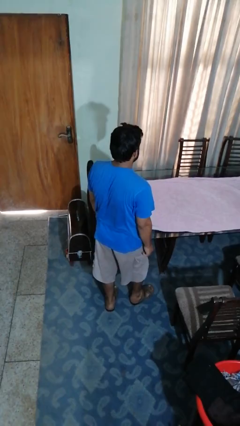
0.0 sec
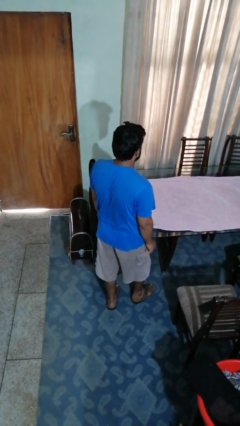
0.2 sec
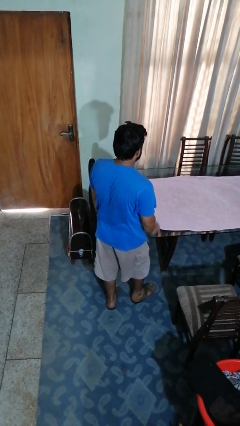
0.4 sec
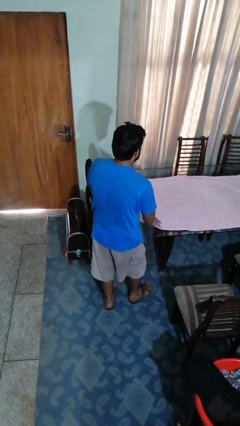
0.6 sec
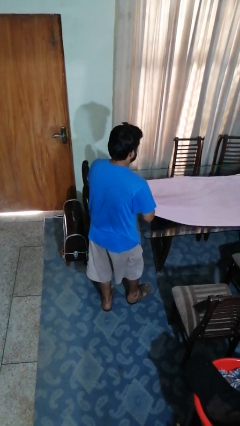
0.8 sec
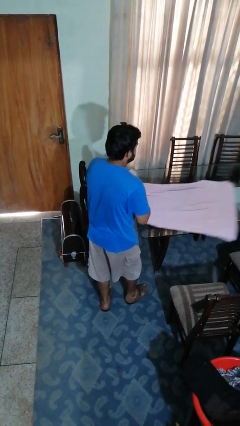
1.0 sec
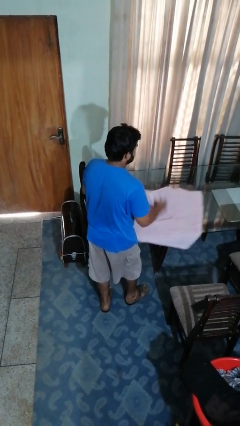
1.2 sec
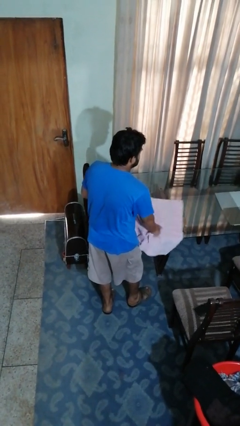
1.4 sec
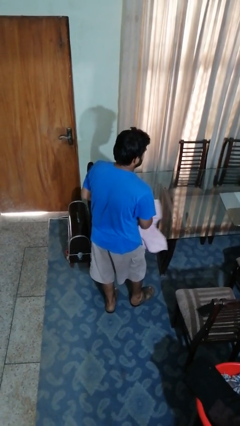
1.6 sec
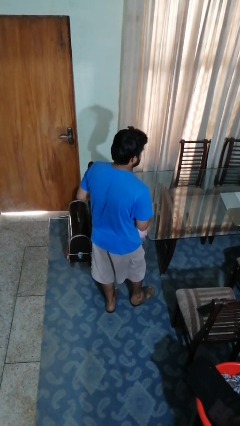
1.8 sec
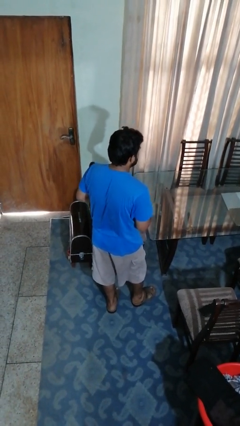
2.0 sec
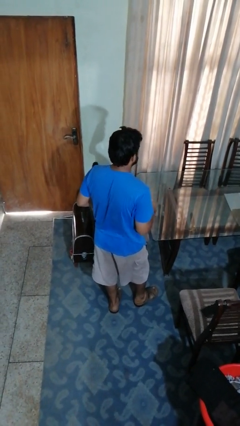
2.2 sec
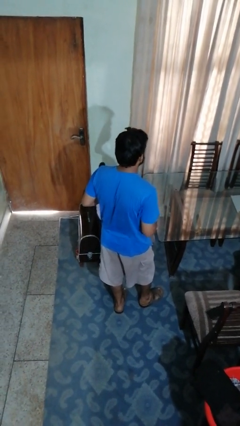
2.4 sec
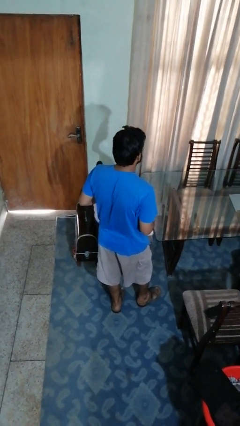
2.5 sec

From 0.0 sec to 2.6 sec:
person folds tablecloth

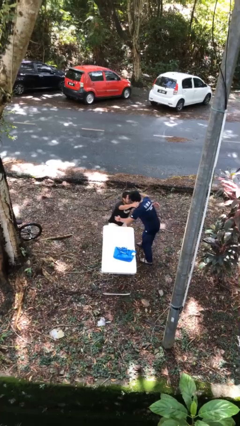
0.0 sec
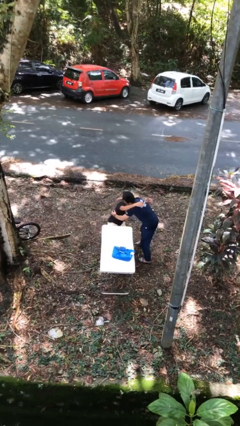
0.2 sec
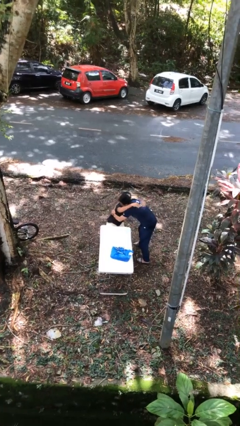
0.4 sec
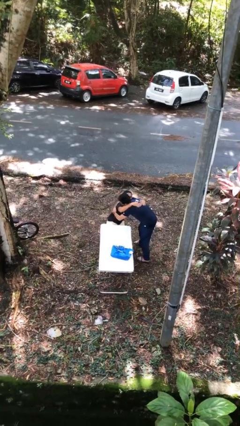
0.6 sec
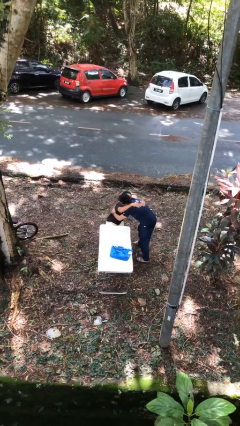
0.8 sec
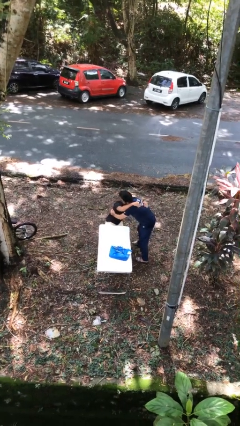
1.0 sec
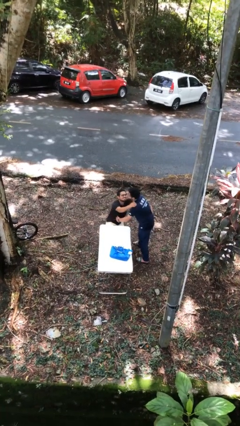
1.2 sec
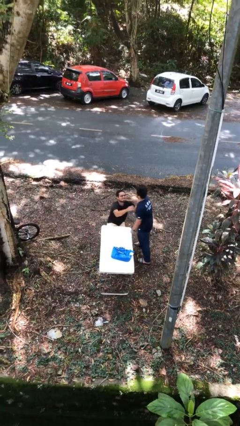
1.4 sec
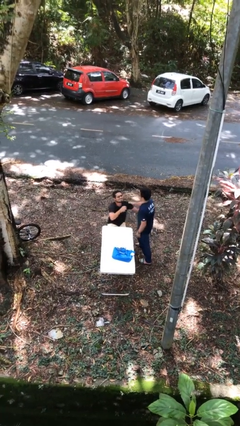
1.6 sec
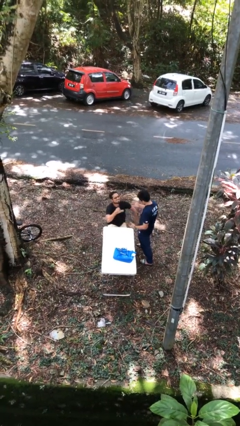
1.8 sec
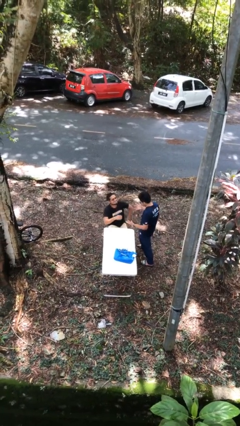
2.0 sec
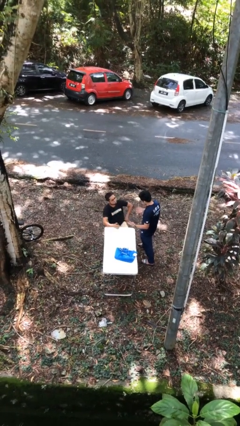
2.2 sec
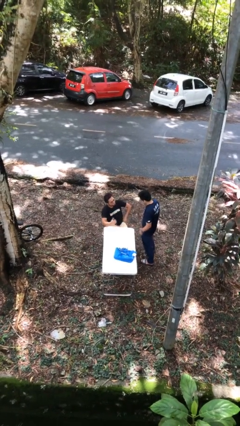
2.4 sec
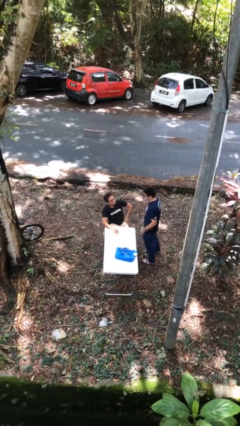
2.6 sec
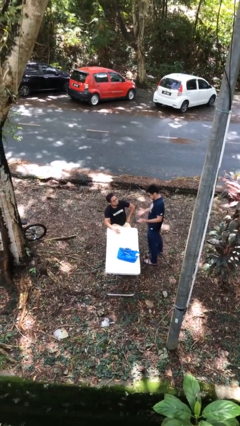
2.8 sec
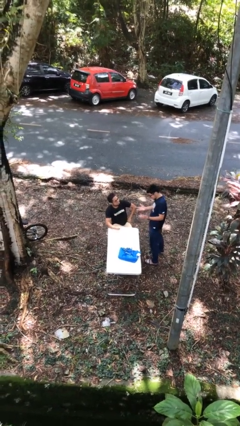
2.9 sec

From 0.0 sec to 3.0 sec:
person embraces person

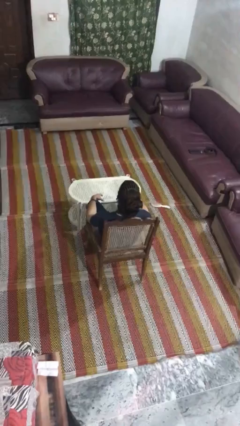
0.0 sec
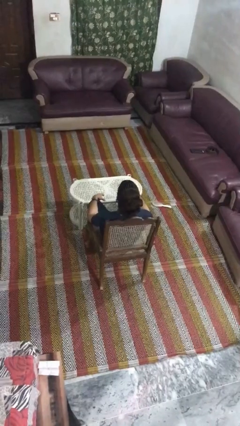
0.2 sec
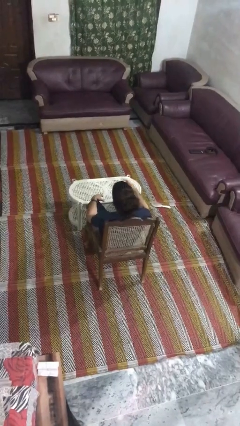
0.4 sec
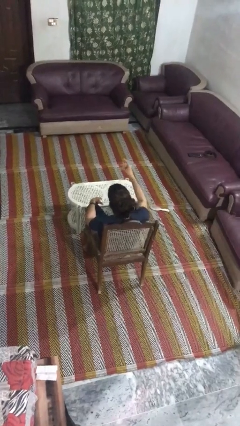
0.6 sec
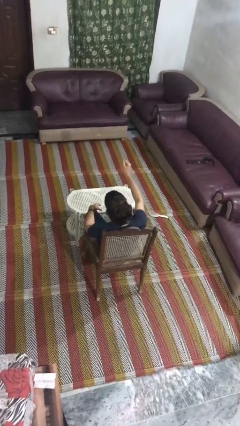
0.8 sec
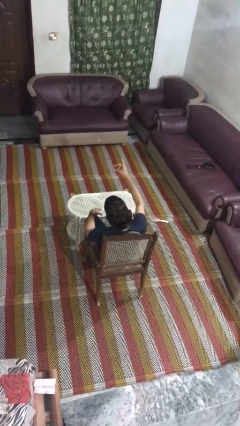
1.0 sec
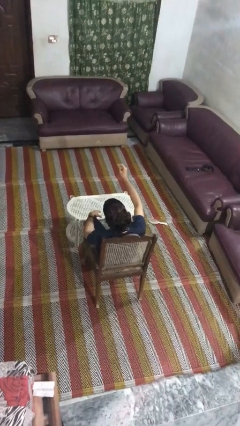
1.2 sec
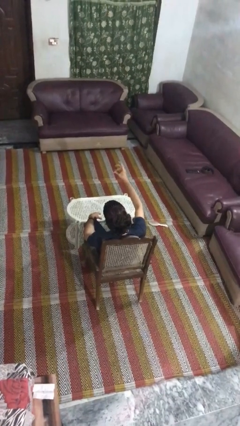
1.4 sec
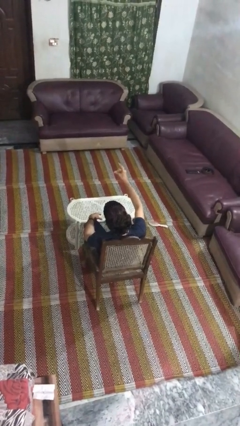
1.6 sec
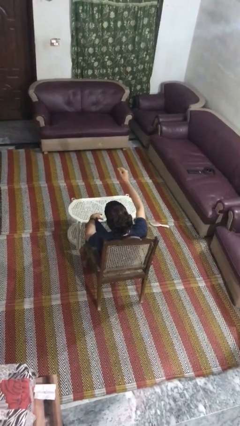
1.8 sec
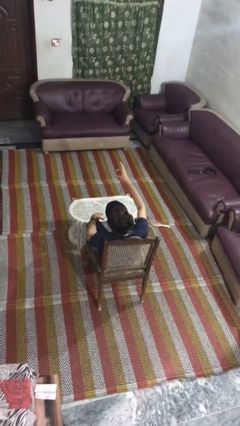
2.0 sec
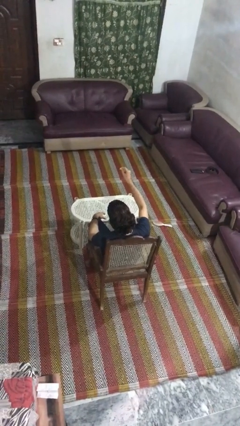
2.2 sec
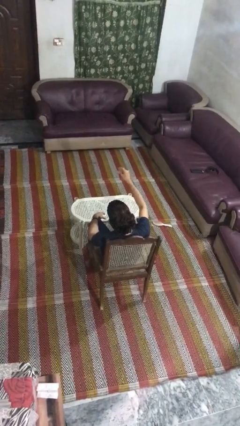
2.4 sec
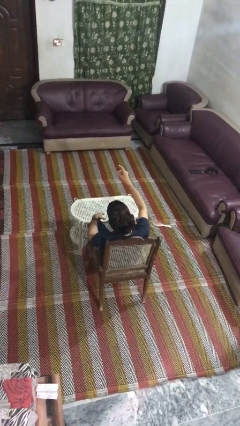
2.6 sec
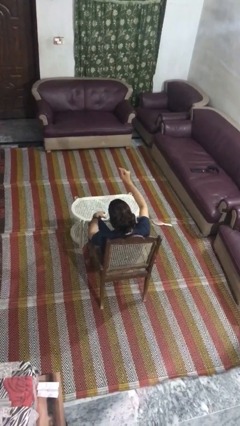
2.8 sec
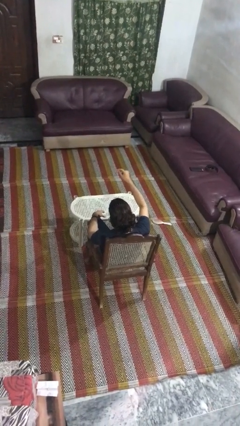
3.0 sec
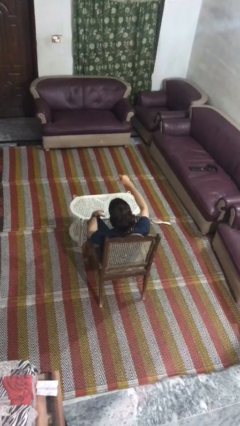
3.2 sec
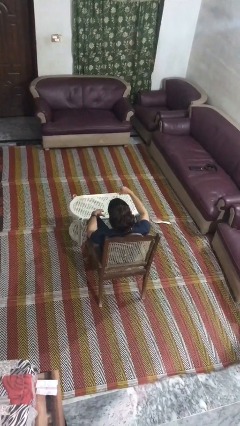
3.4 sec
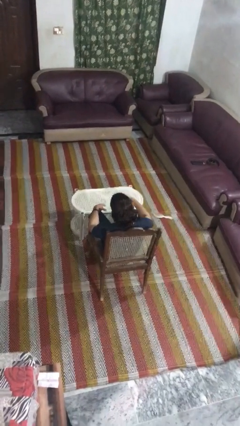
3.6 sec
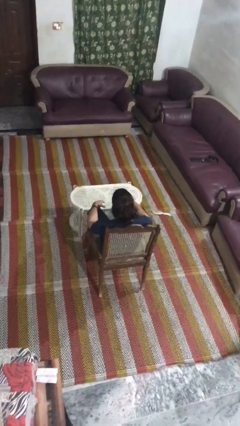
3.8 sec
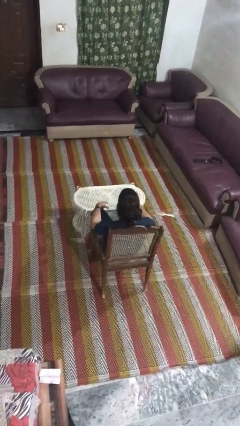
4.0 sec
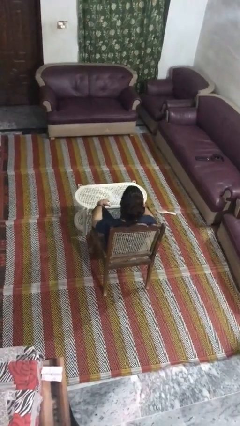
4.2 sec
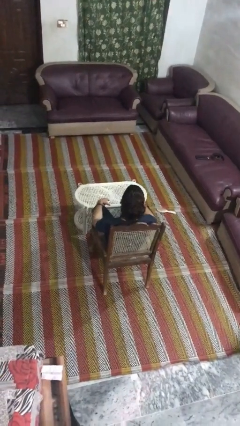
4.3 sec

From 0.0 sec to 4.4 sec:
person snaps fingers

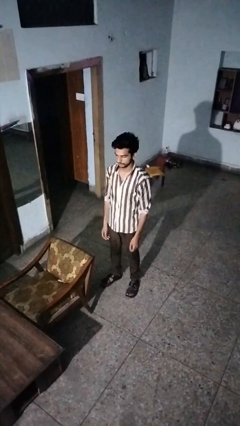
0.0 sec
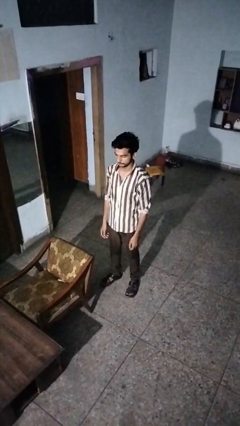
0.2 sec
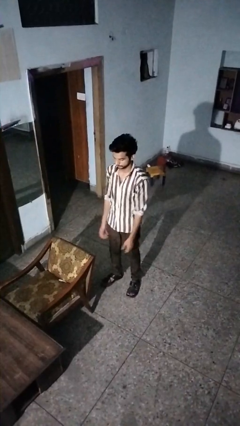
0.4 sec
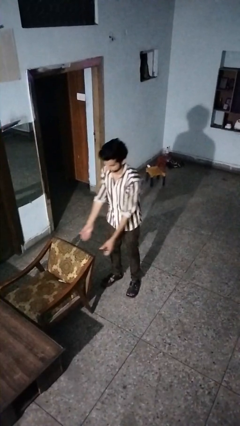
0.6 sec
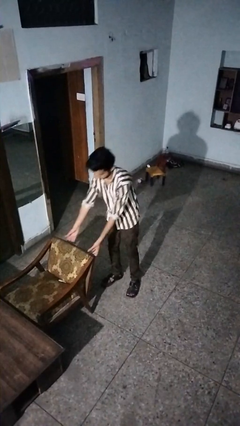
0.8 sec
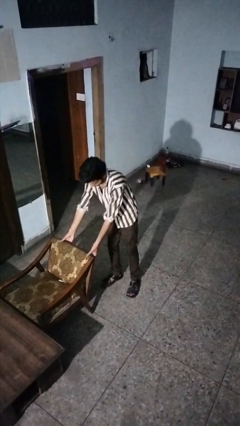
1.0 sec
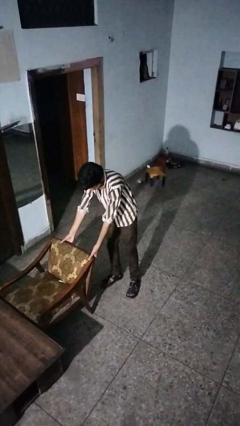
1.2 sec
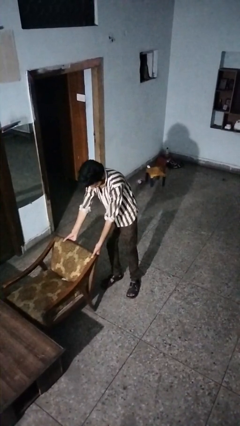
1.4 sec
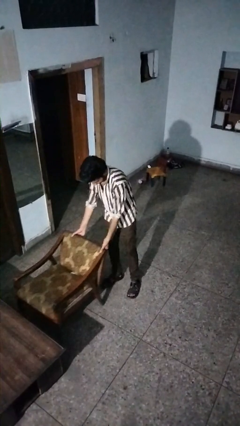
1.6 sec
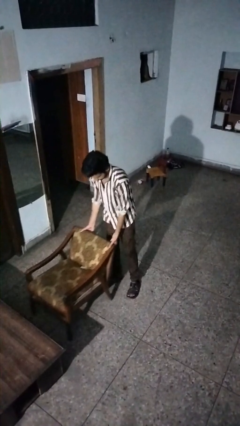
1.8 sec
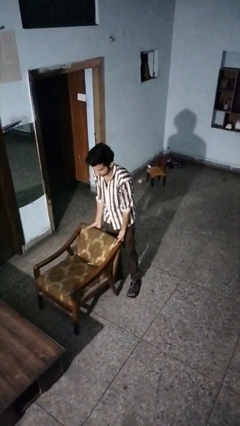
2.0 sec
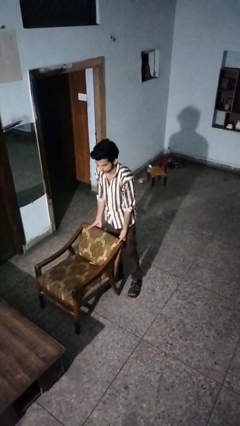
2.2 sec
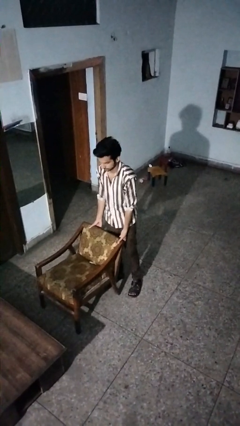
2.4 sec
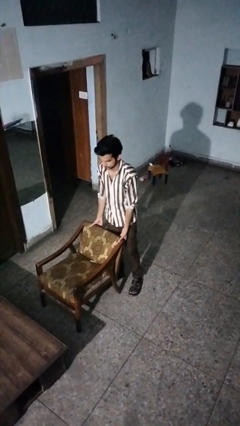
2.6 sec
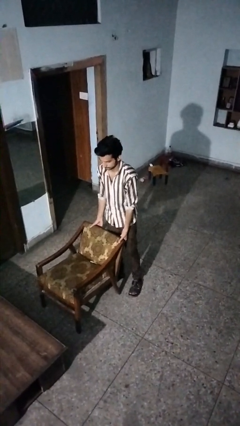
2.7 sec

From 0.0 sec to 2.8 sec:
person pulls out chair

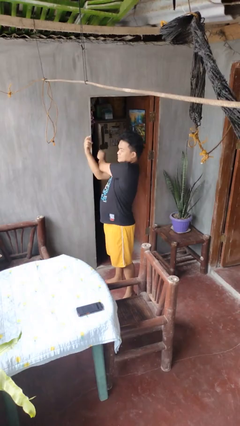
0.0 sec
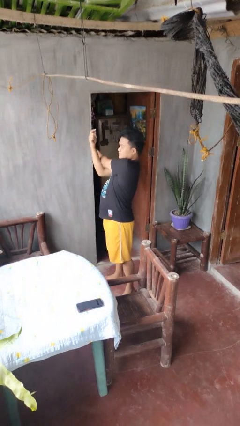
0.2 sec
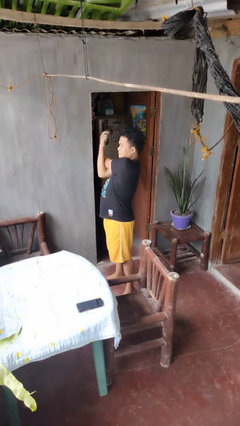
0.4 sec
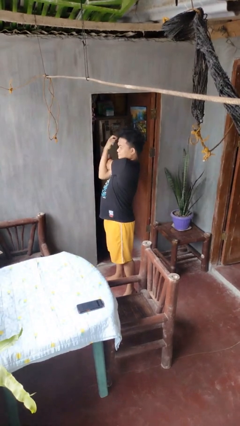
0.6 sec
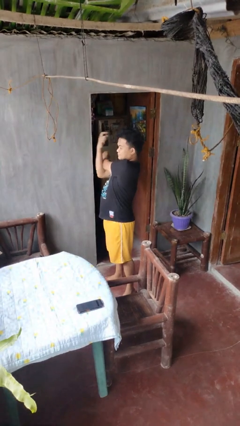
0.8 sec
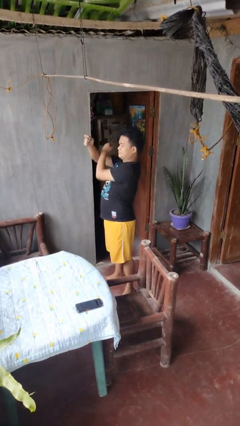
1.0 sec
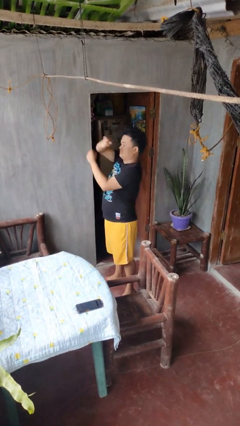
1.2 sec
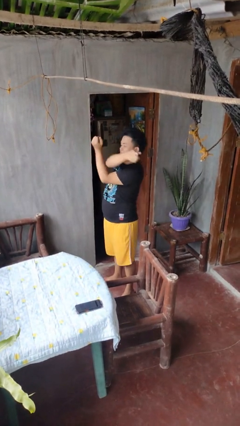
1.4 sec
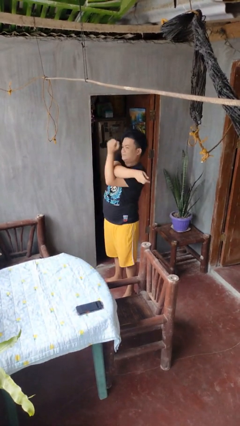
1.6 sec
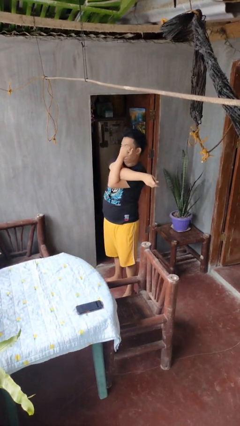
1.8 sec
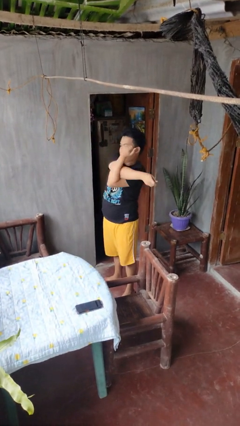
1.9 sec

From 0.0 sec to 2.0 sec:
person stretches arms to side

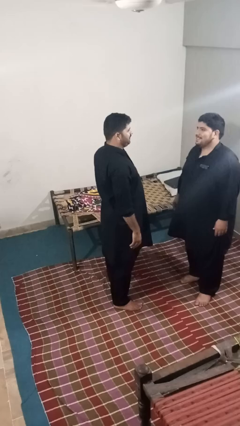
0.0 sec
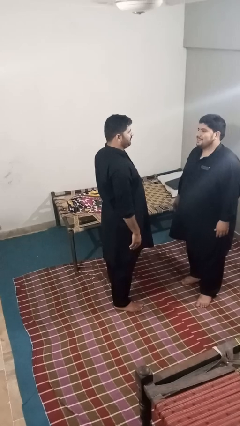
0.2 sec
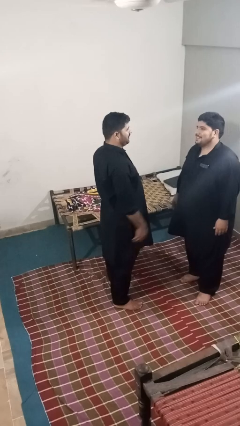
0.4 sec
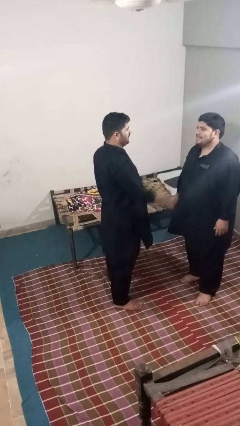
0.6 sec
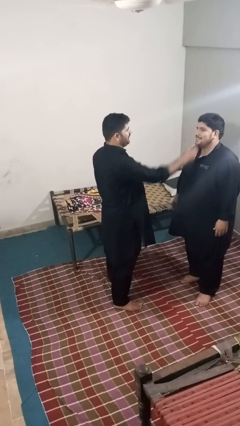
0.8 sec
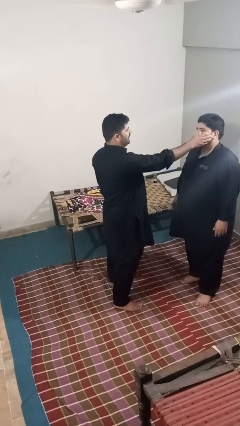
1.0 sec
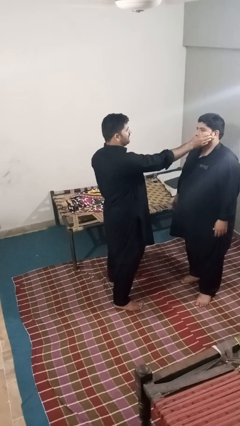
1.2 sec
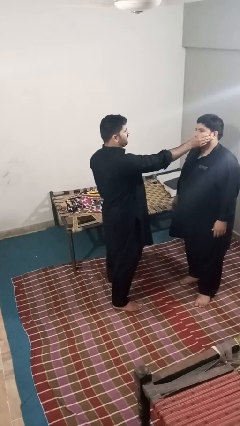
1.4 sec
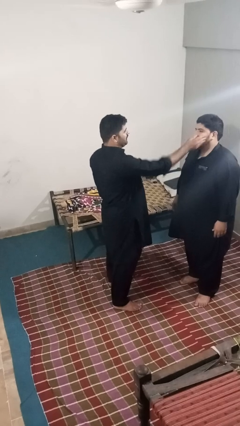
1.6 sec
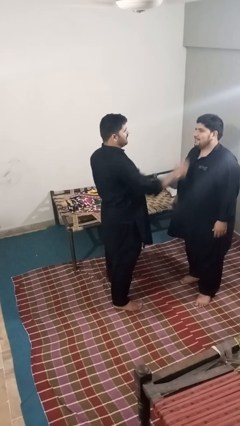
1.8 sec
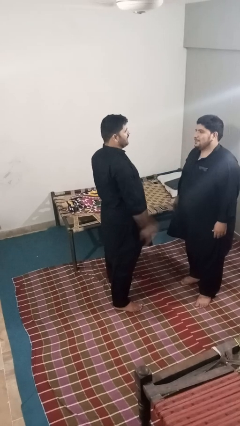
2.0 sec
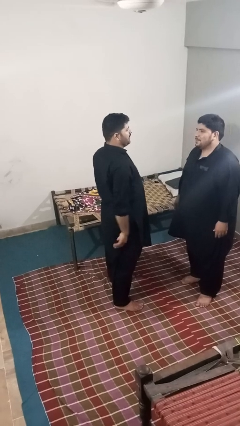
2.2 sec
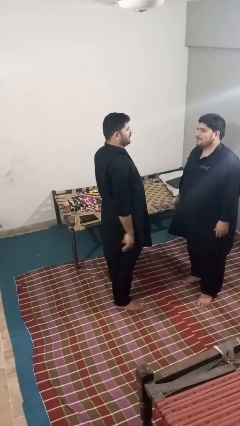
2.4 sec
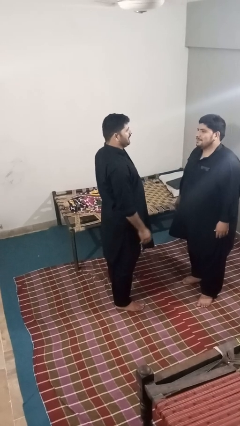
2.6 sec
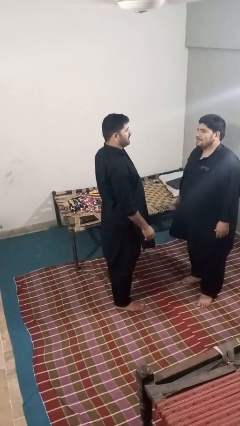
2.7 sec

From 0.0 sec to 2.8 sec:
person touches face of person
